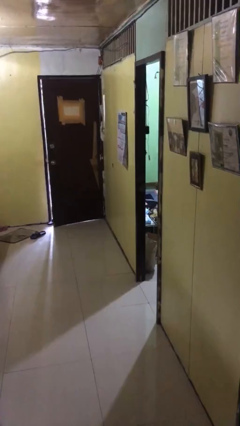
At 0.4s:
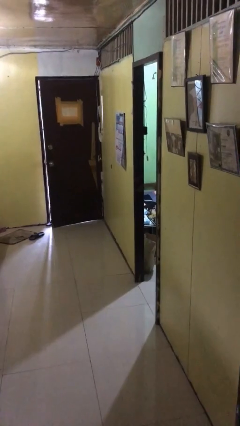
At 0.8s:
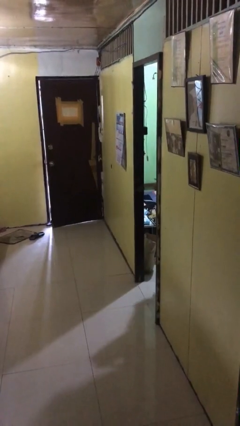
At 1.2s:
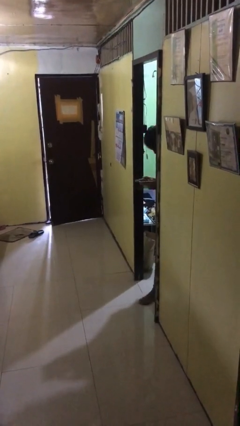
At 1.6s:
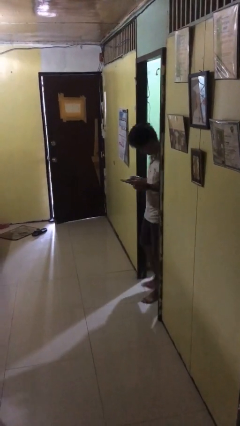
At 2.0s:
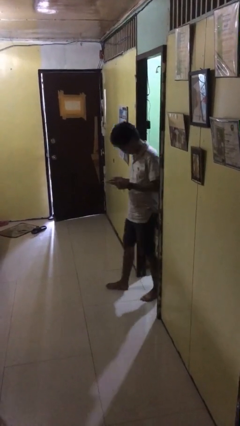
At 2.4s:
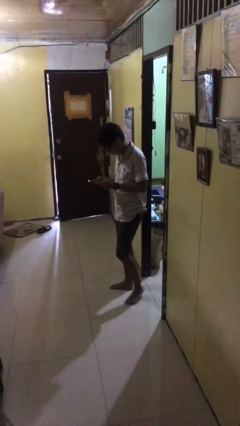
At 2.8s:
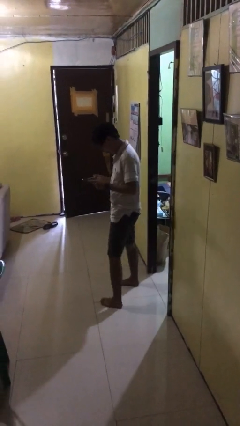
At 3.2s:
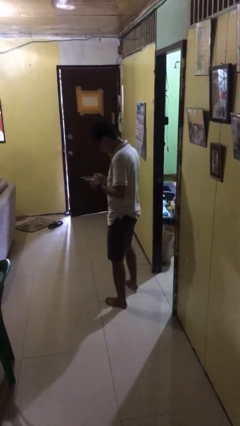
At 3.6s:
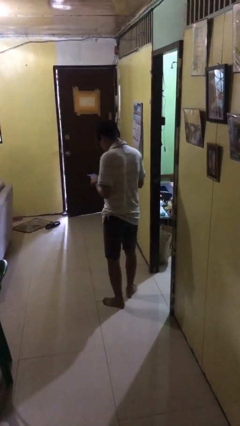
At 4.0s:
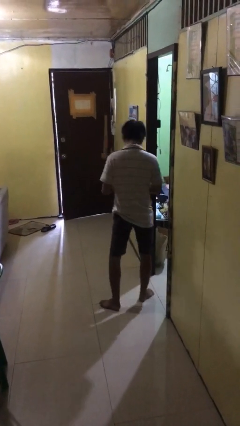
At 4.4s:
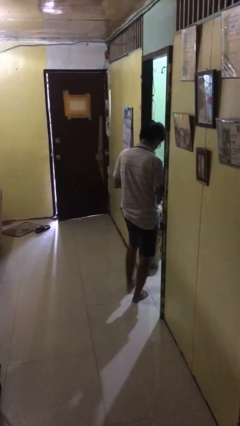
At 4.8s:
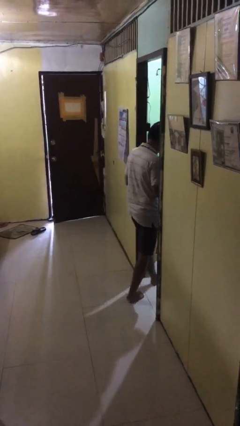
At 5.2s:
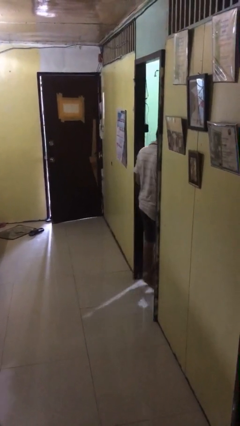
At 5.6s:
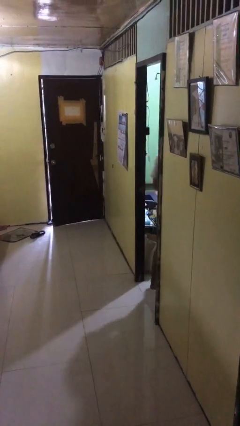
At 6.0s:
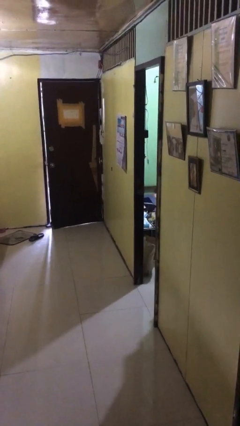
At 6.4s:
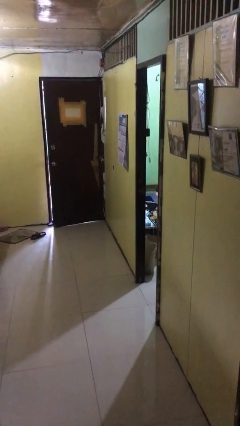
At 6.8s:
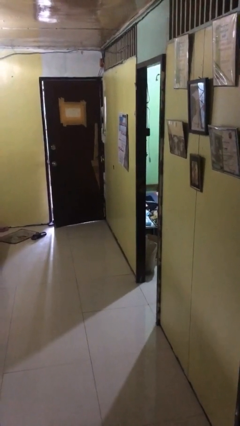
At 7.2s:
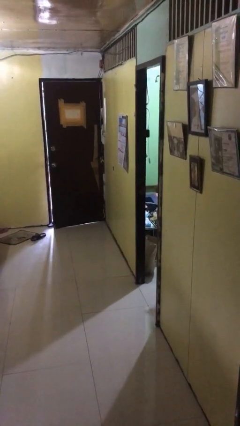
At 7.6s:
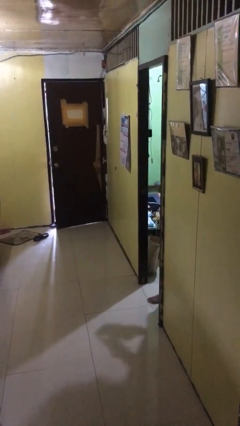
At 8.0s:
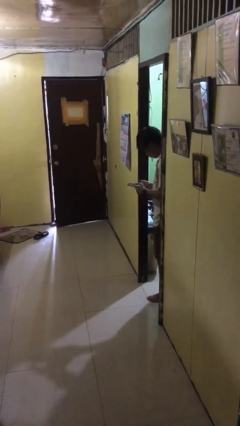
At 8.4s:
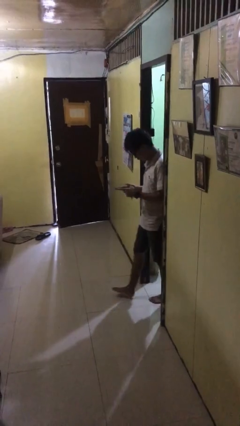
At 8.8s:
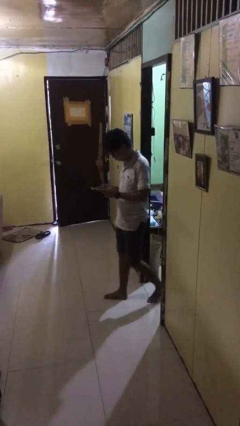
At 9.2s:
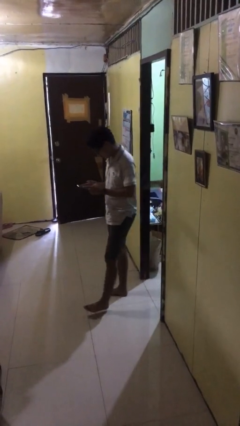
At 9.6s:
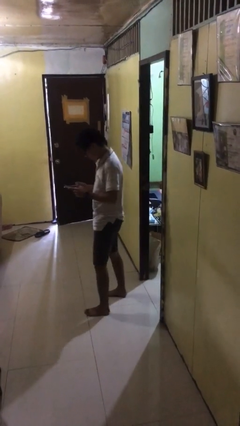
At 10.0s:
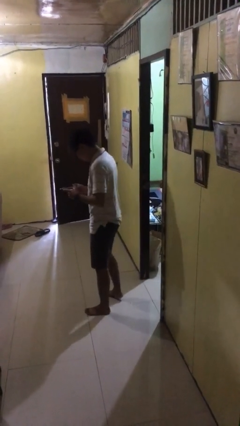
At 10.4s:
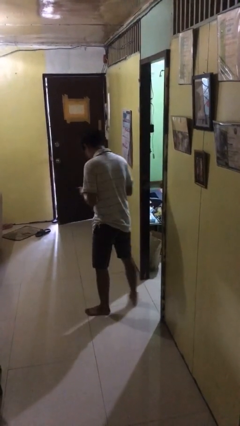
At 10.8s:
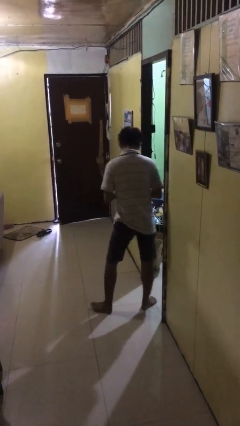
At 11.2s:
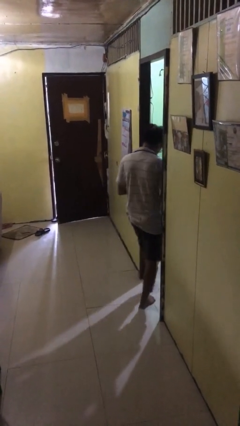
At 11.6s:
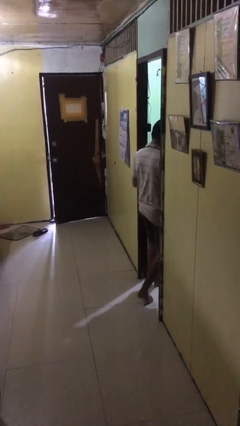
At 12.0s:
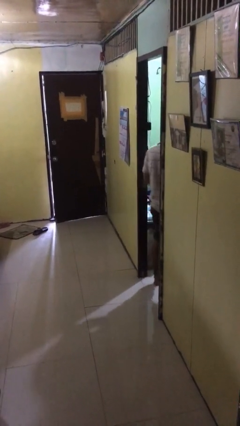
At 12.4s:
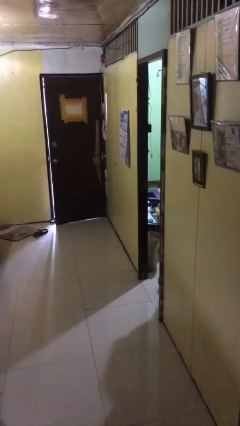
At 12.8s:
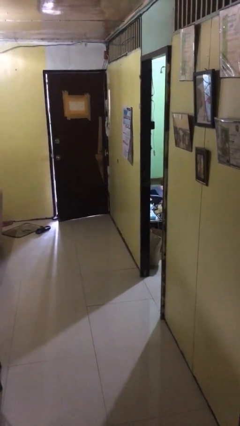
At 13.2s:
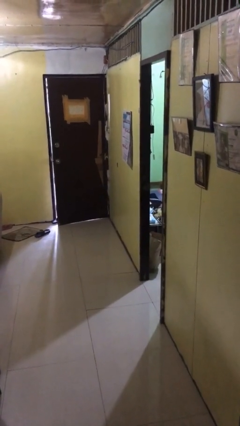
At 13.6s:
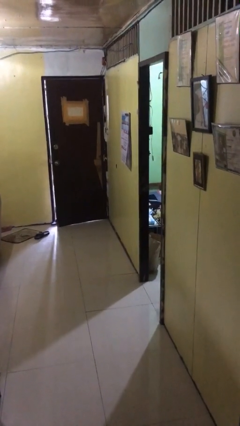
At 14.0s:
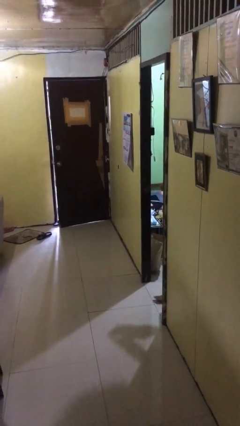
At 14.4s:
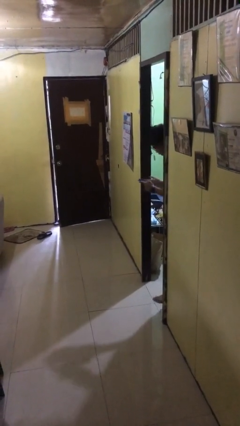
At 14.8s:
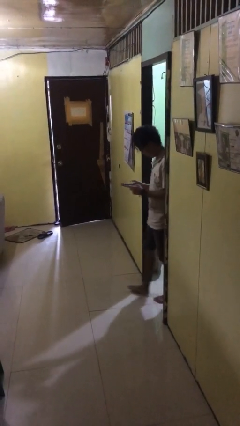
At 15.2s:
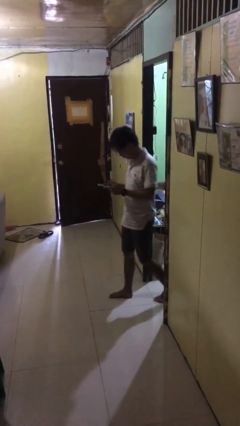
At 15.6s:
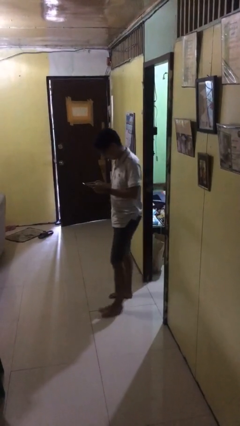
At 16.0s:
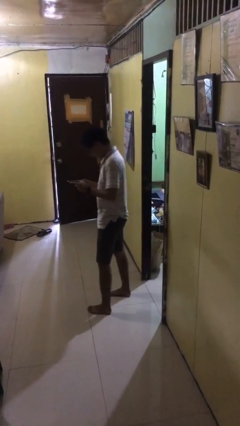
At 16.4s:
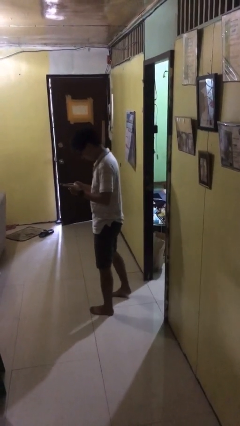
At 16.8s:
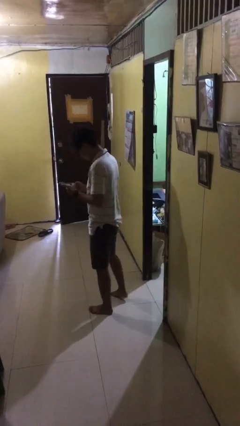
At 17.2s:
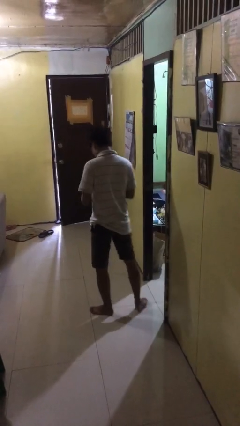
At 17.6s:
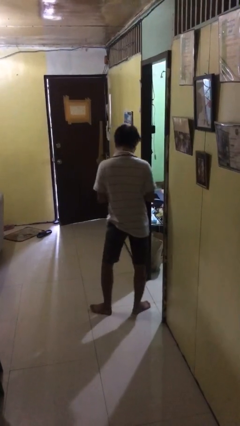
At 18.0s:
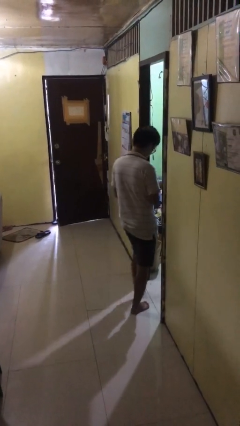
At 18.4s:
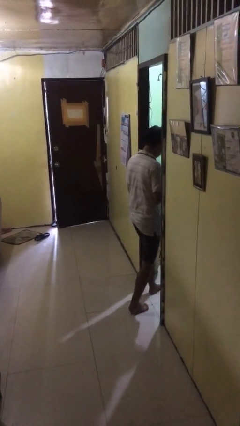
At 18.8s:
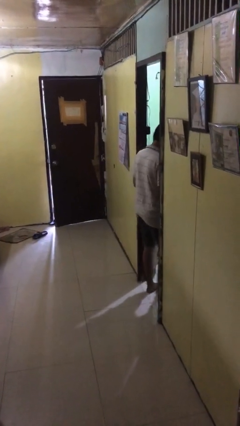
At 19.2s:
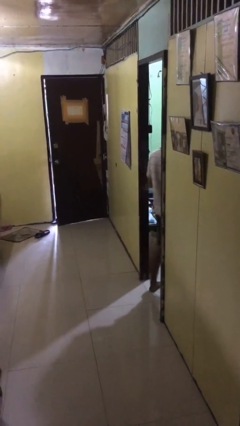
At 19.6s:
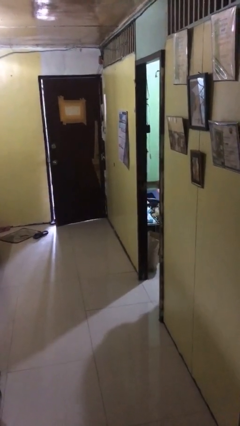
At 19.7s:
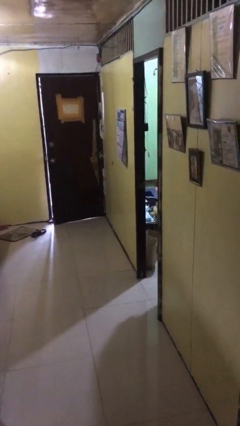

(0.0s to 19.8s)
person texts on phone

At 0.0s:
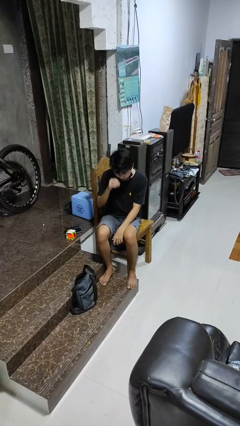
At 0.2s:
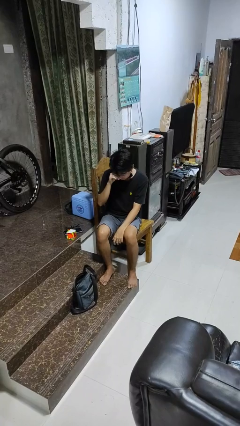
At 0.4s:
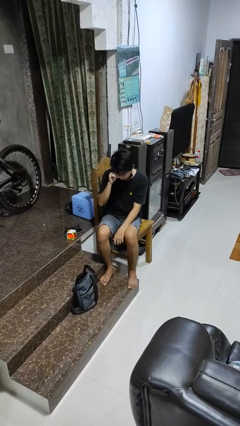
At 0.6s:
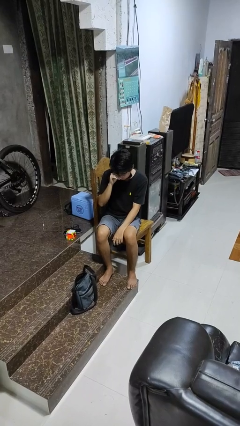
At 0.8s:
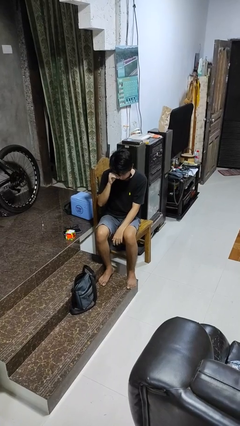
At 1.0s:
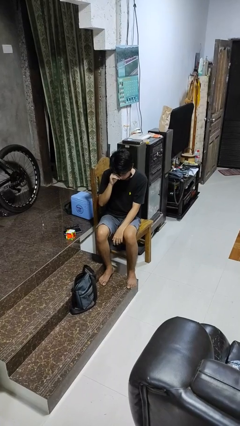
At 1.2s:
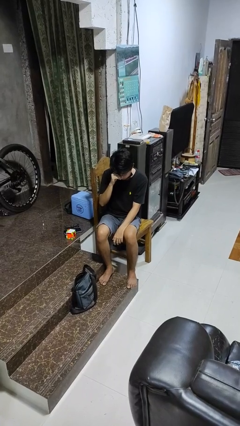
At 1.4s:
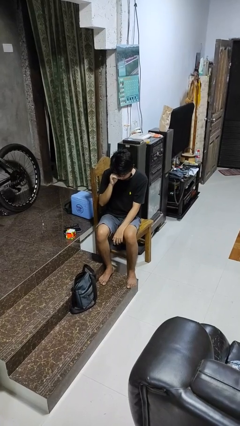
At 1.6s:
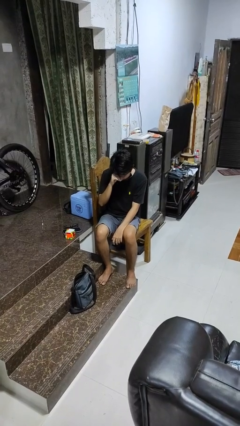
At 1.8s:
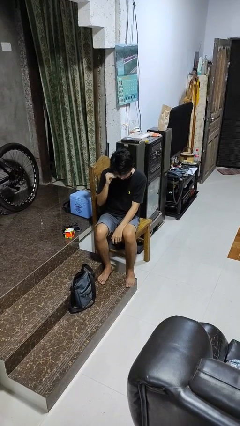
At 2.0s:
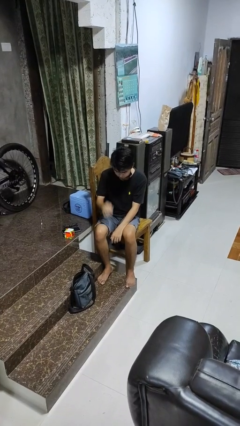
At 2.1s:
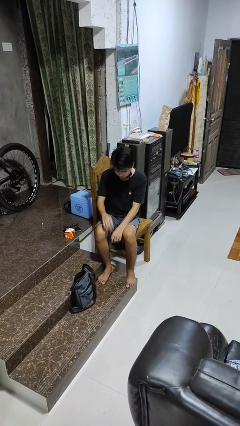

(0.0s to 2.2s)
person rubs eyes

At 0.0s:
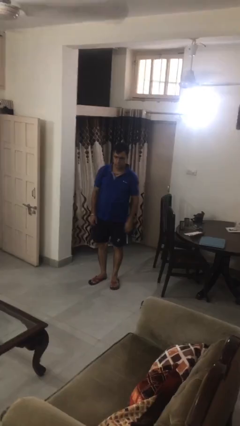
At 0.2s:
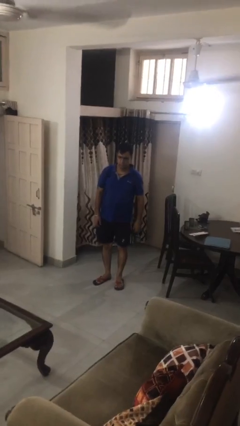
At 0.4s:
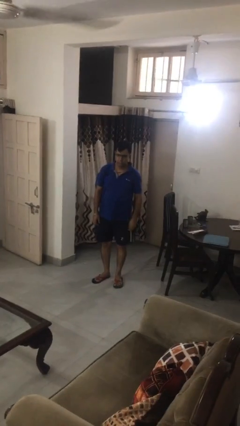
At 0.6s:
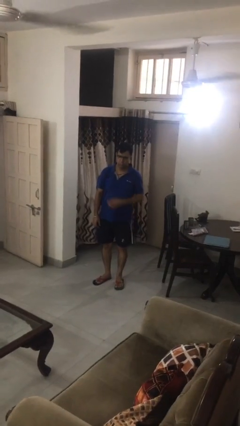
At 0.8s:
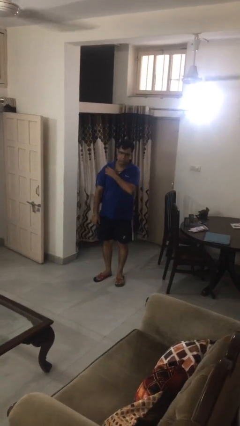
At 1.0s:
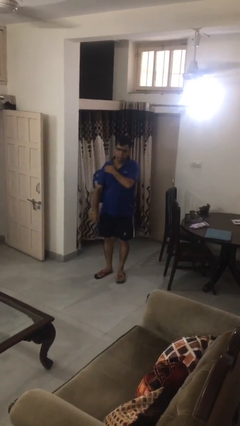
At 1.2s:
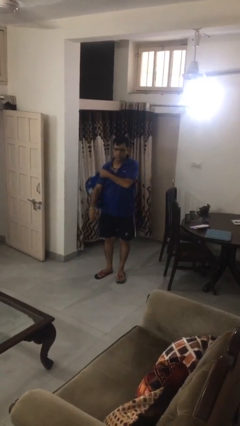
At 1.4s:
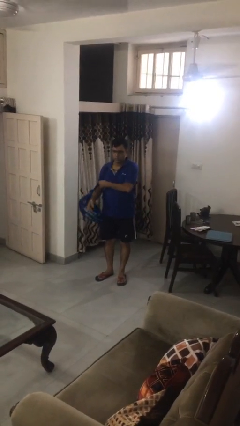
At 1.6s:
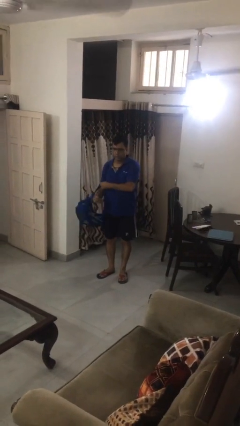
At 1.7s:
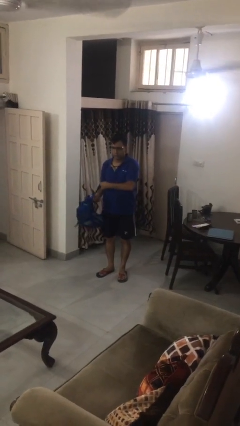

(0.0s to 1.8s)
person takes off backpack

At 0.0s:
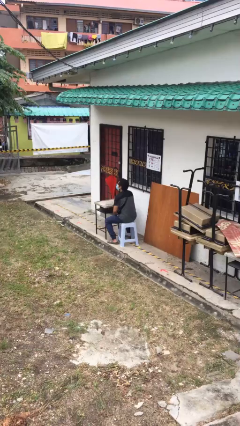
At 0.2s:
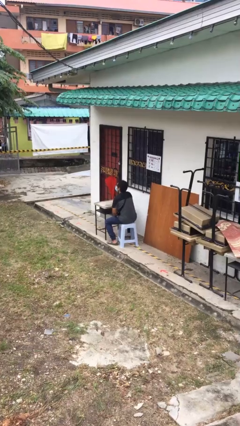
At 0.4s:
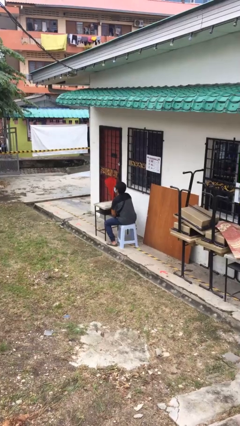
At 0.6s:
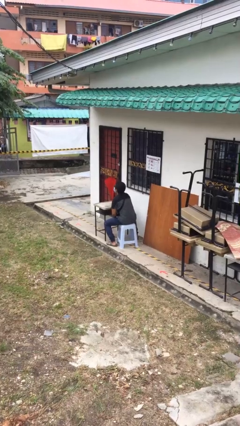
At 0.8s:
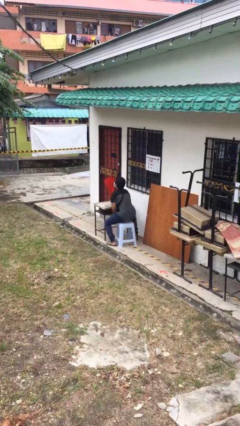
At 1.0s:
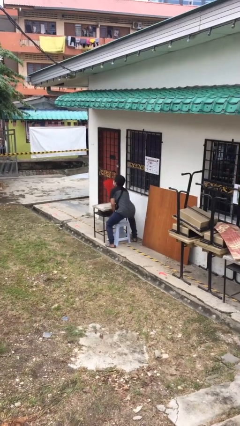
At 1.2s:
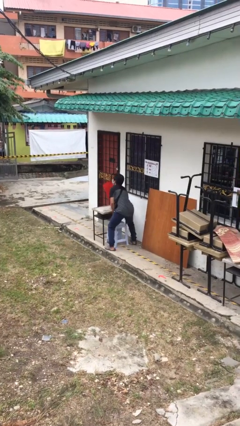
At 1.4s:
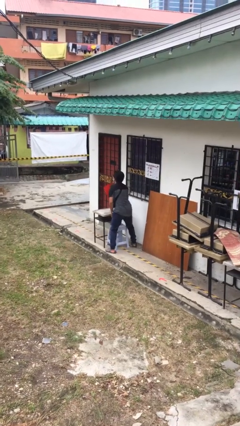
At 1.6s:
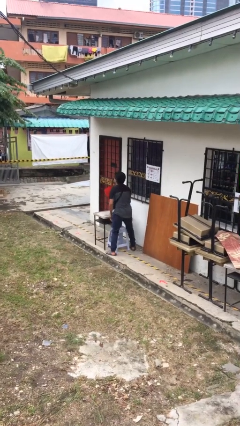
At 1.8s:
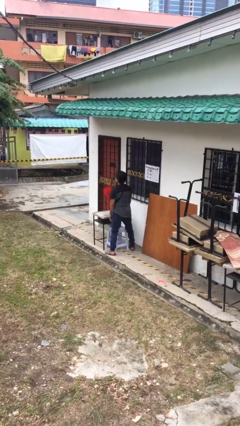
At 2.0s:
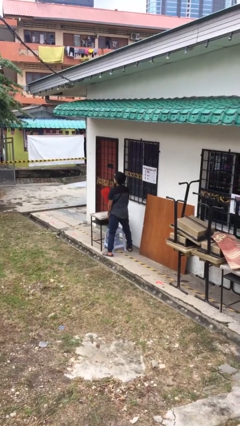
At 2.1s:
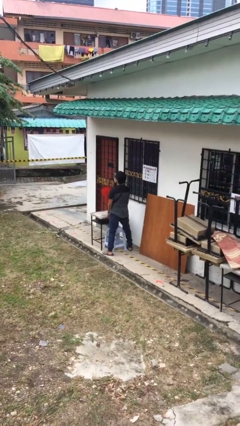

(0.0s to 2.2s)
person stands up

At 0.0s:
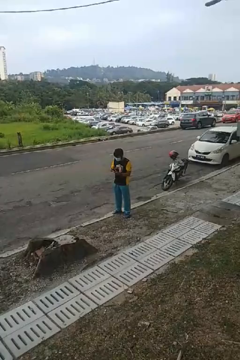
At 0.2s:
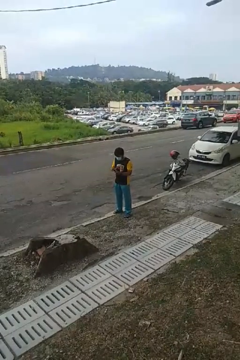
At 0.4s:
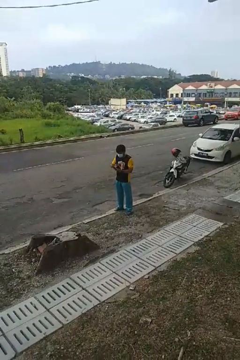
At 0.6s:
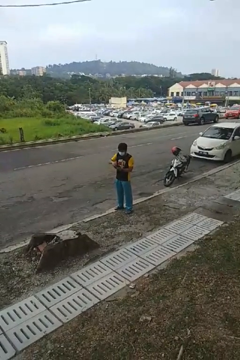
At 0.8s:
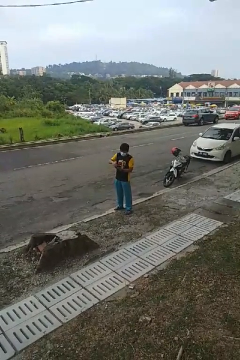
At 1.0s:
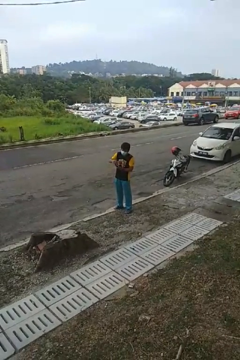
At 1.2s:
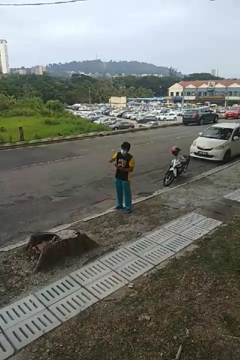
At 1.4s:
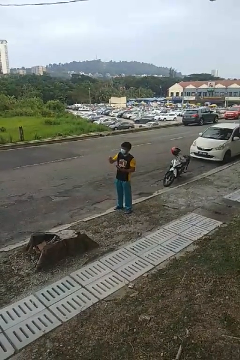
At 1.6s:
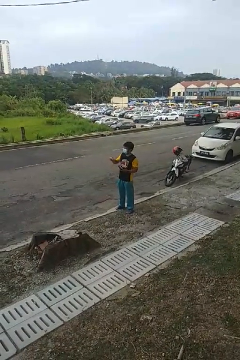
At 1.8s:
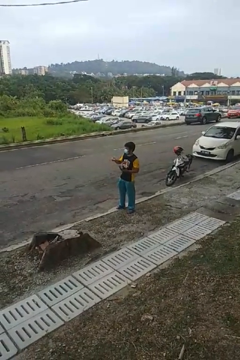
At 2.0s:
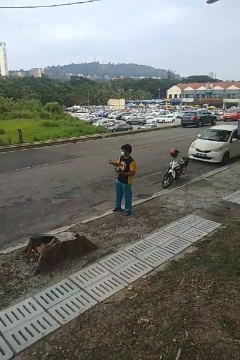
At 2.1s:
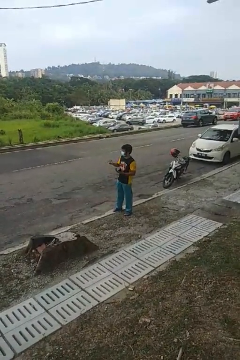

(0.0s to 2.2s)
person takes object from purse
